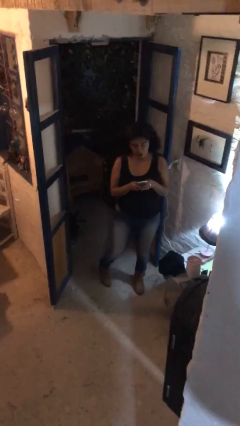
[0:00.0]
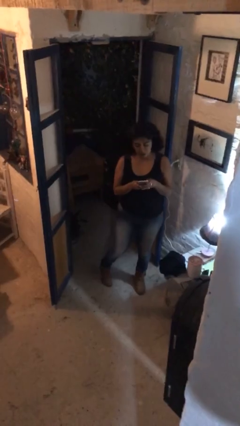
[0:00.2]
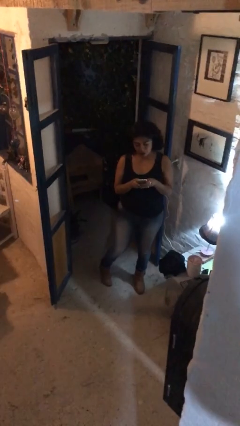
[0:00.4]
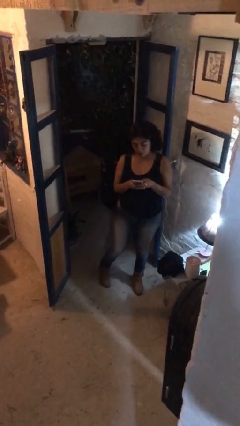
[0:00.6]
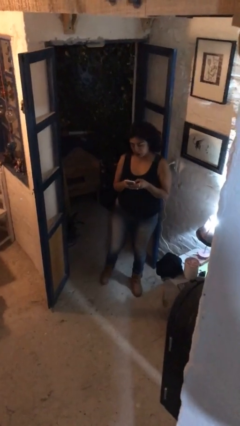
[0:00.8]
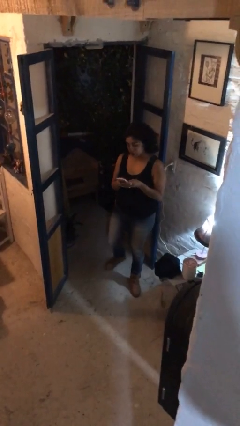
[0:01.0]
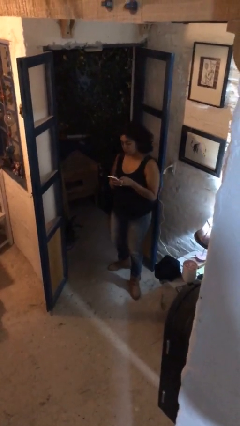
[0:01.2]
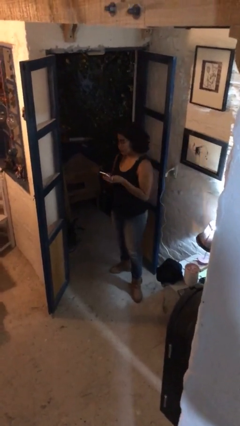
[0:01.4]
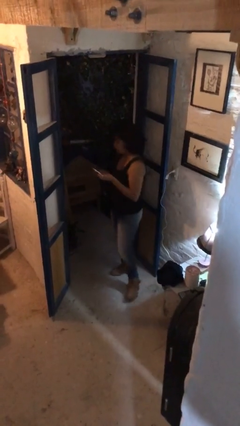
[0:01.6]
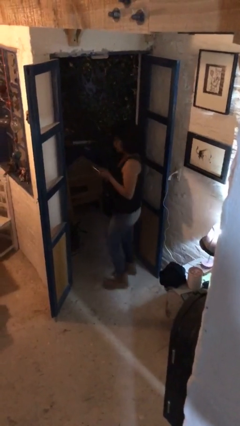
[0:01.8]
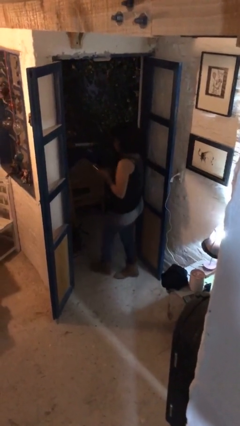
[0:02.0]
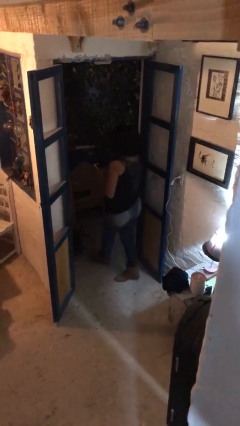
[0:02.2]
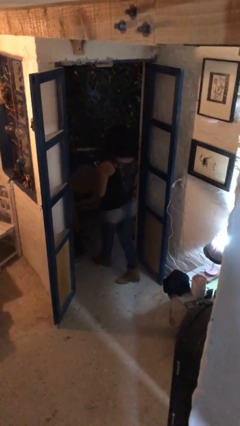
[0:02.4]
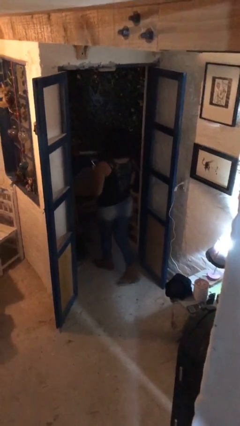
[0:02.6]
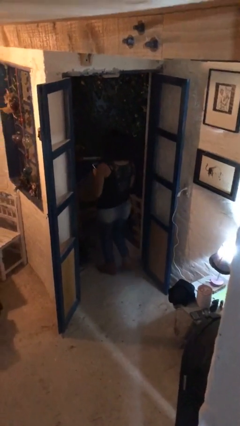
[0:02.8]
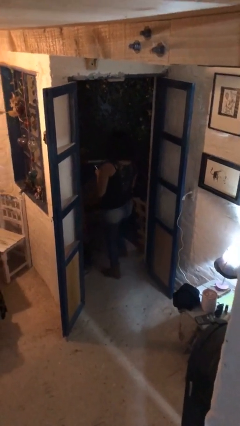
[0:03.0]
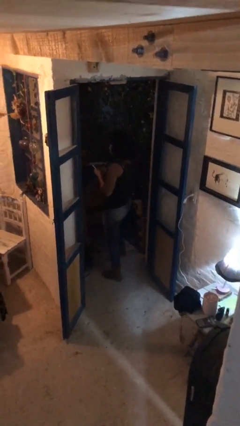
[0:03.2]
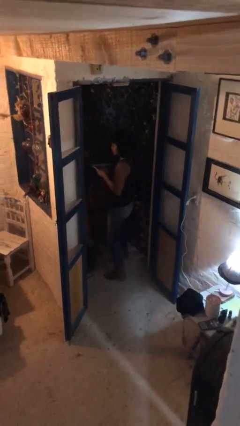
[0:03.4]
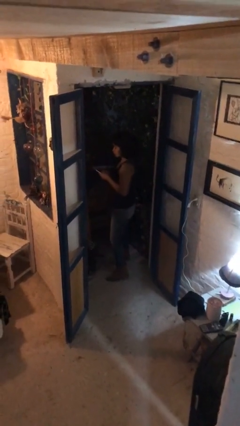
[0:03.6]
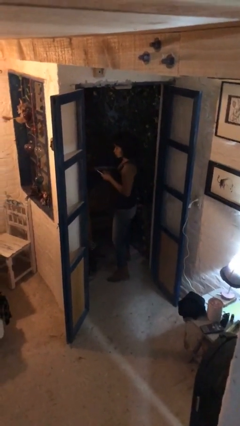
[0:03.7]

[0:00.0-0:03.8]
person exits scene through structure

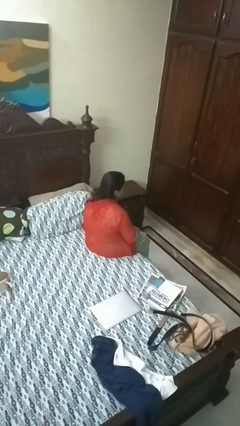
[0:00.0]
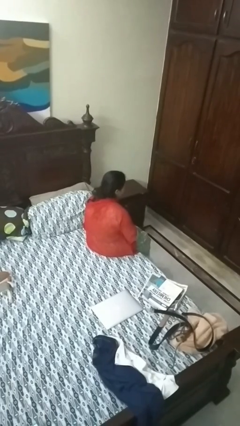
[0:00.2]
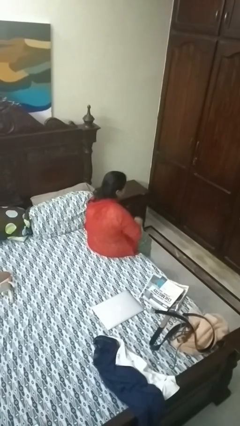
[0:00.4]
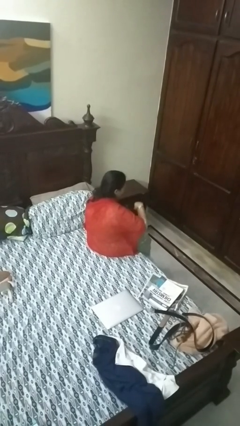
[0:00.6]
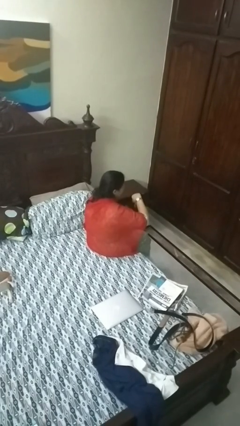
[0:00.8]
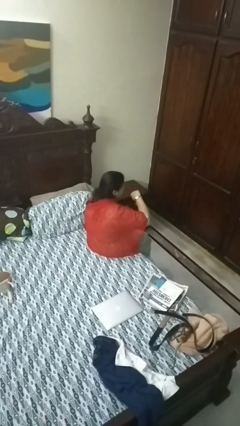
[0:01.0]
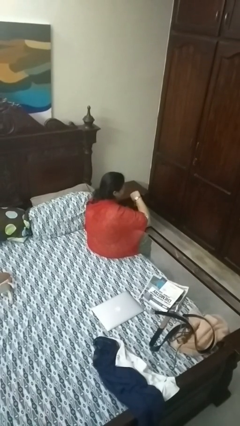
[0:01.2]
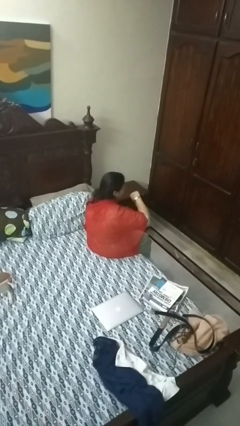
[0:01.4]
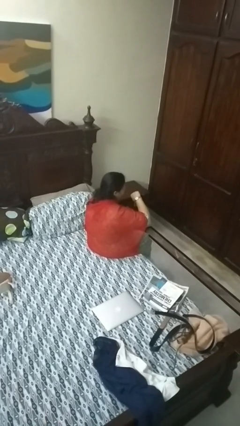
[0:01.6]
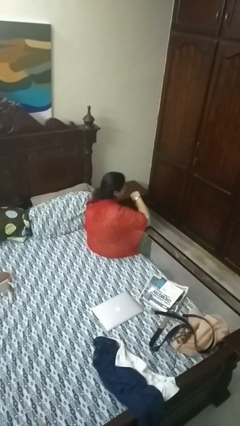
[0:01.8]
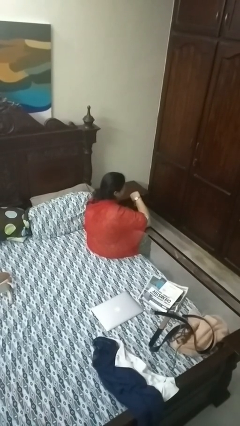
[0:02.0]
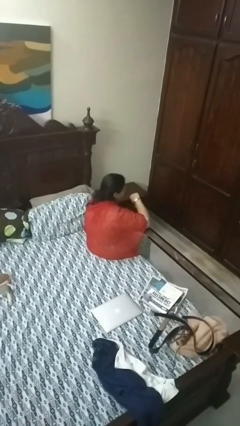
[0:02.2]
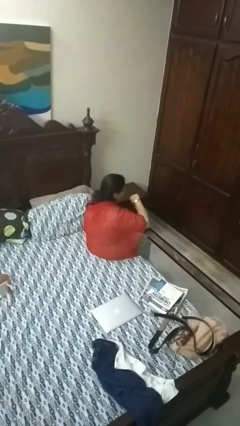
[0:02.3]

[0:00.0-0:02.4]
person looks at wristwatch

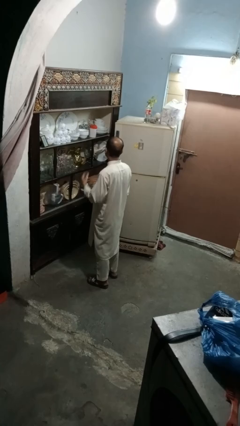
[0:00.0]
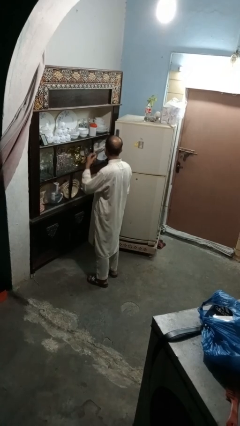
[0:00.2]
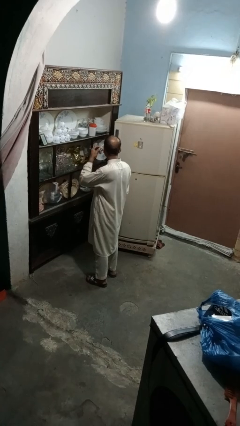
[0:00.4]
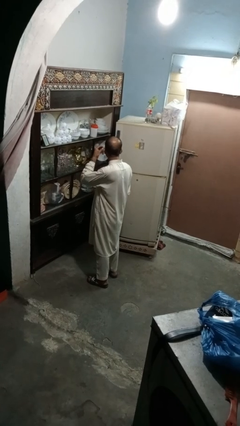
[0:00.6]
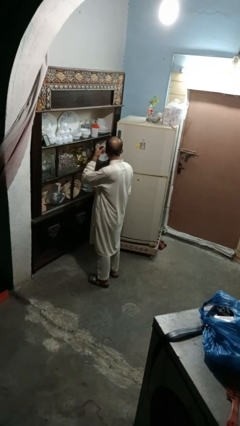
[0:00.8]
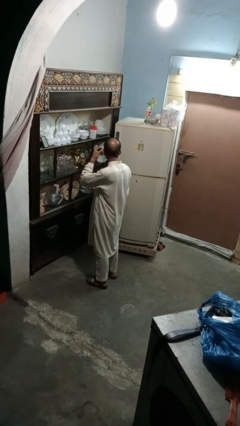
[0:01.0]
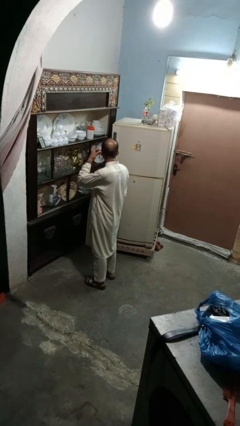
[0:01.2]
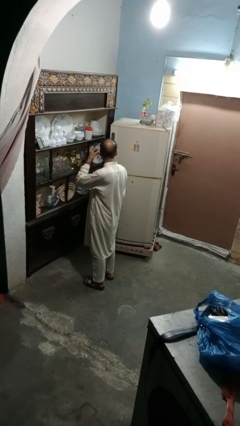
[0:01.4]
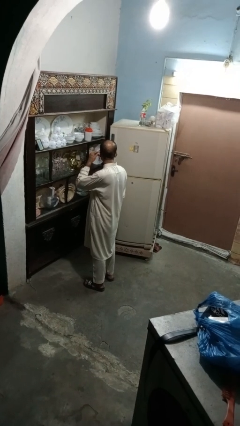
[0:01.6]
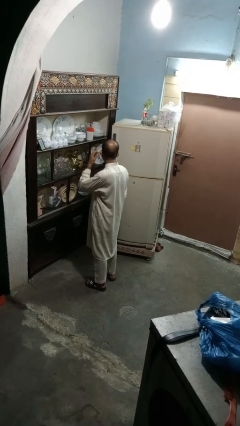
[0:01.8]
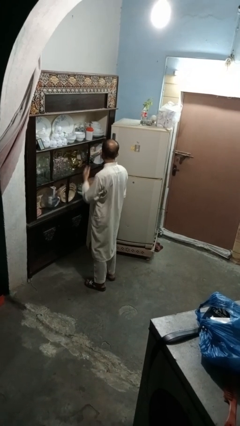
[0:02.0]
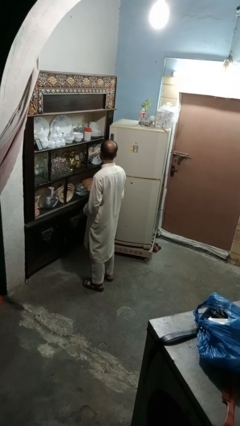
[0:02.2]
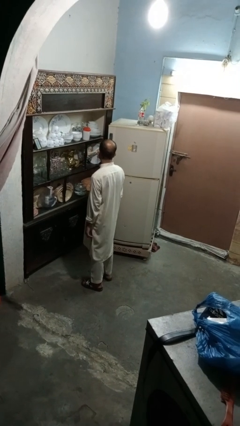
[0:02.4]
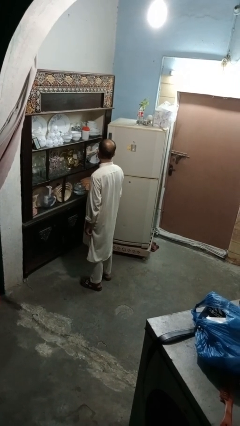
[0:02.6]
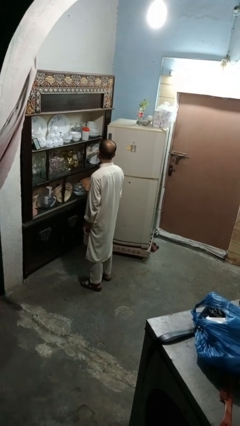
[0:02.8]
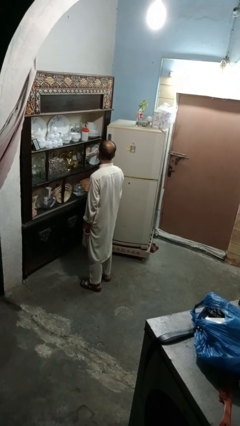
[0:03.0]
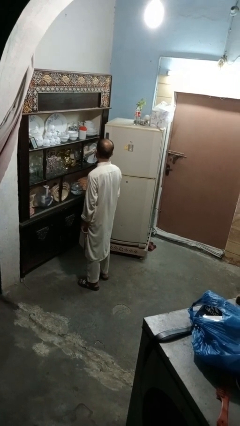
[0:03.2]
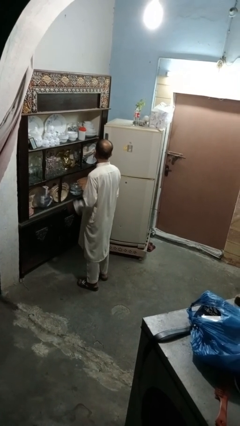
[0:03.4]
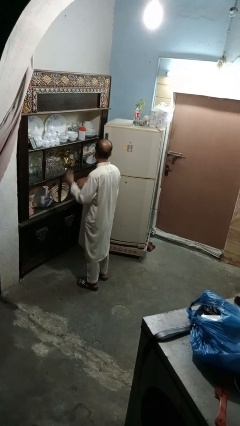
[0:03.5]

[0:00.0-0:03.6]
person puts on earrings

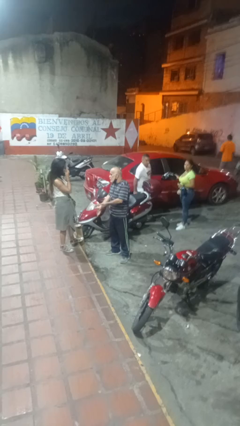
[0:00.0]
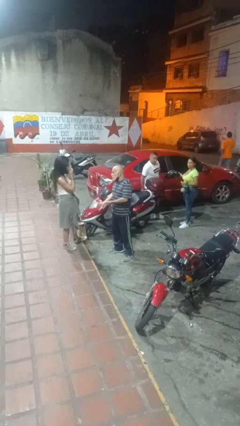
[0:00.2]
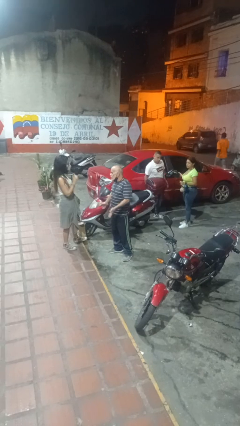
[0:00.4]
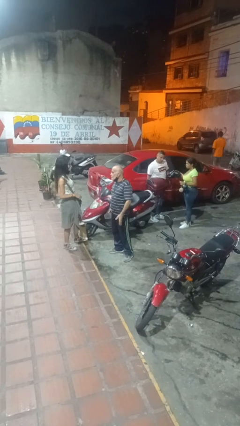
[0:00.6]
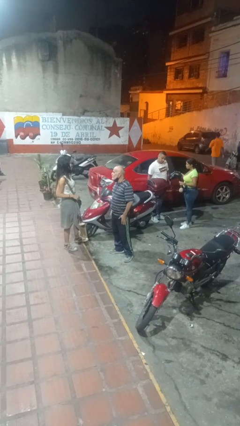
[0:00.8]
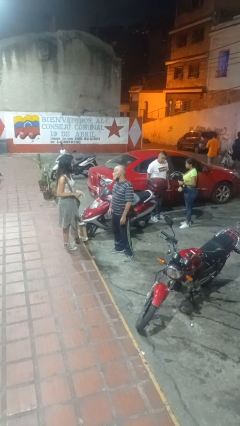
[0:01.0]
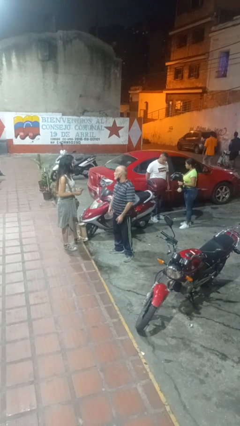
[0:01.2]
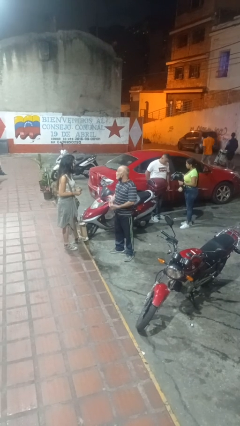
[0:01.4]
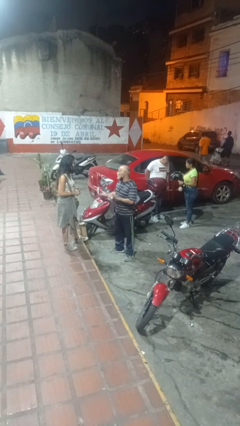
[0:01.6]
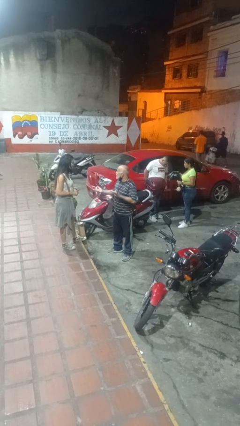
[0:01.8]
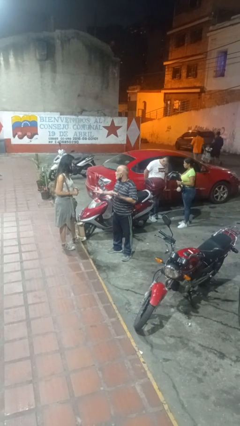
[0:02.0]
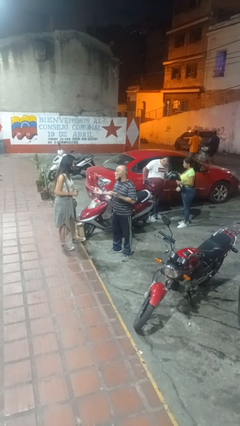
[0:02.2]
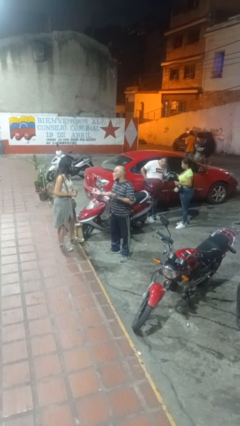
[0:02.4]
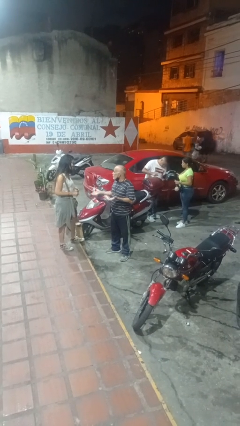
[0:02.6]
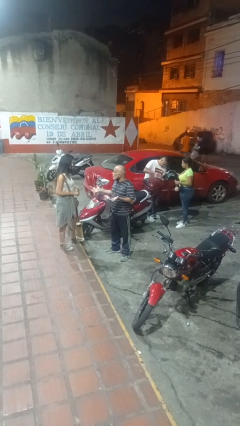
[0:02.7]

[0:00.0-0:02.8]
person talks to person

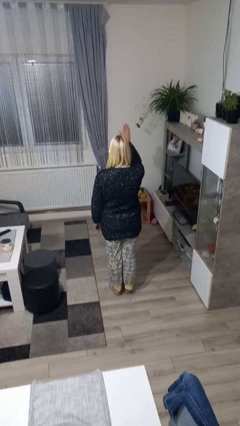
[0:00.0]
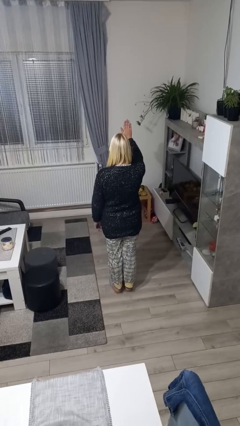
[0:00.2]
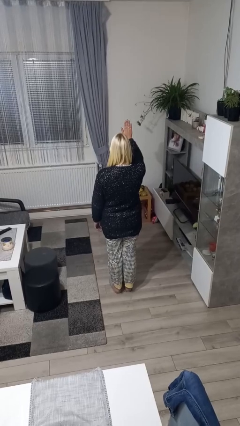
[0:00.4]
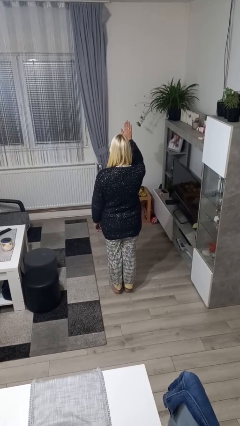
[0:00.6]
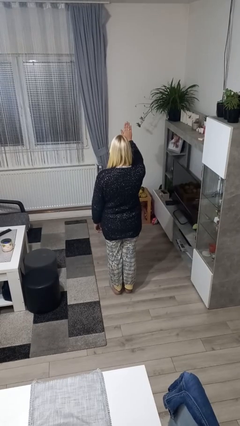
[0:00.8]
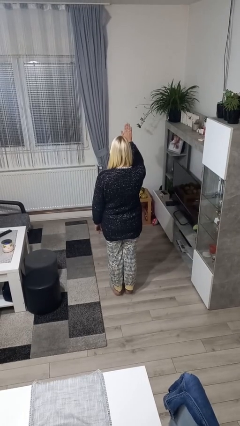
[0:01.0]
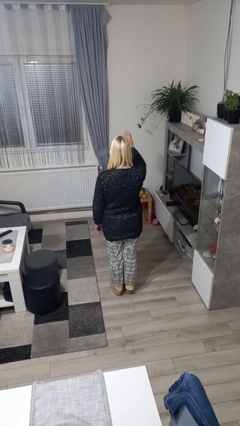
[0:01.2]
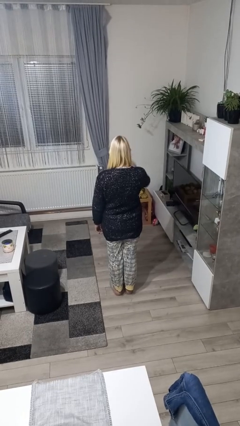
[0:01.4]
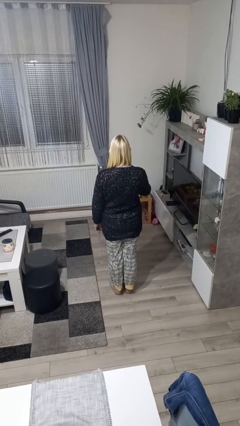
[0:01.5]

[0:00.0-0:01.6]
person gestures stop

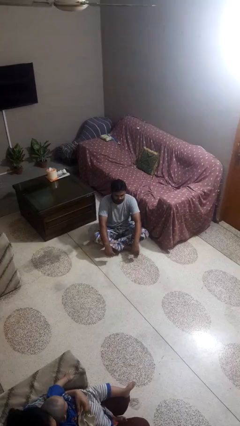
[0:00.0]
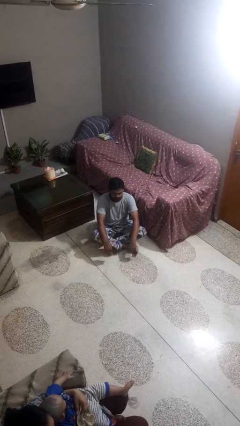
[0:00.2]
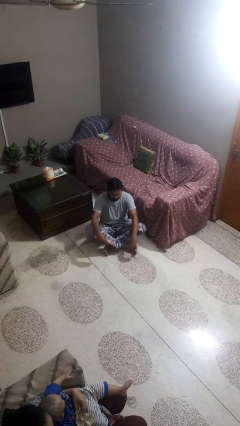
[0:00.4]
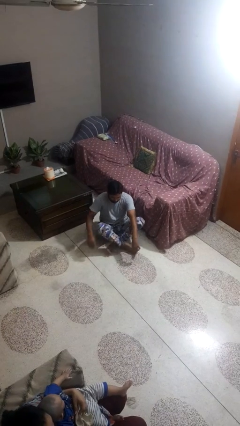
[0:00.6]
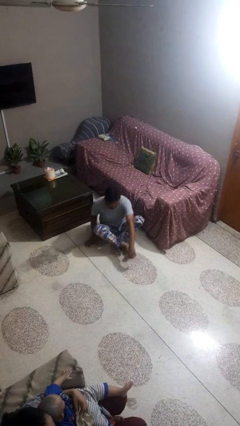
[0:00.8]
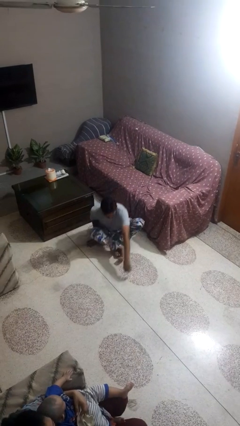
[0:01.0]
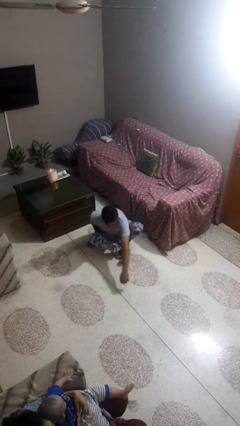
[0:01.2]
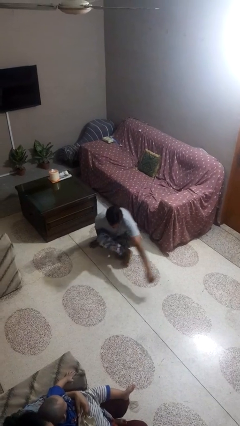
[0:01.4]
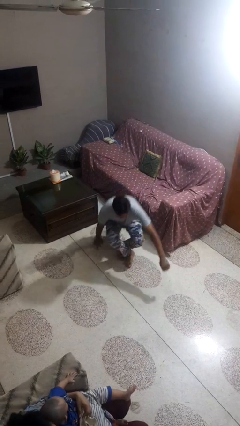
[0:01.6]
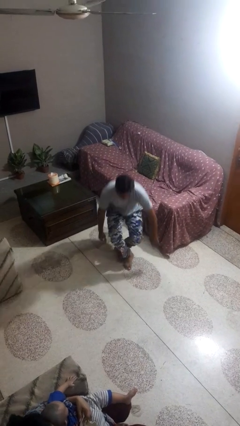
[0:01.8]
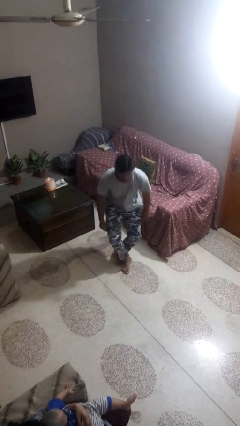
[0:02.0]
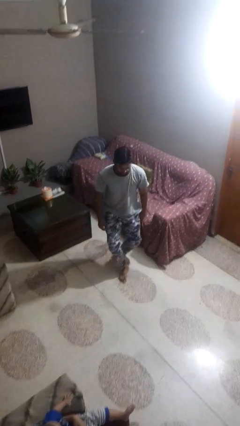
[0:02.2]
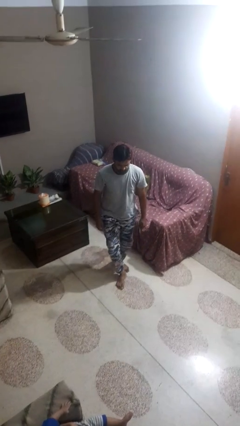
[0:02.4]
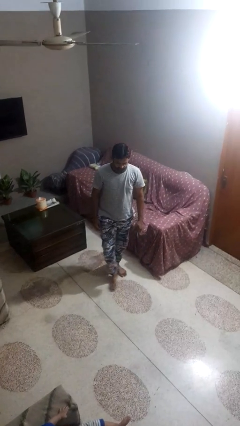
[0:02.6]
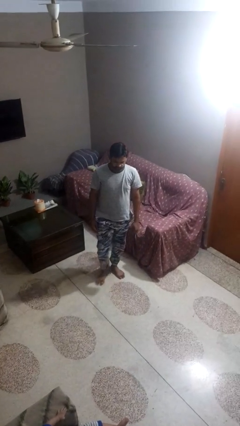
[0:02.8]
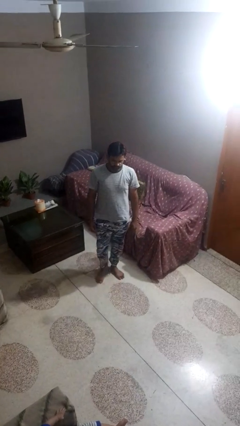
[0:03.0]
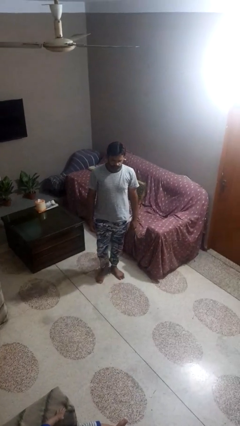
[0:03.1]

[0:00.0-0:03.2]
person stands up from floor
